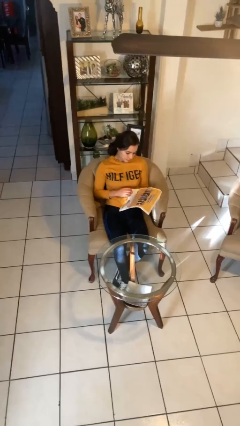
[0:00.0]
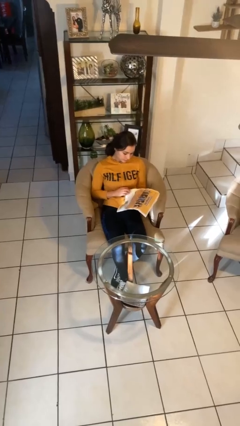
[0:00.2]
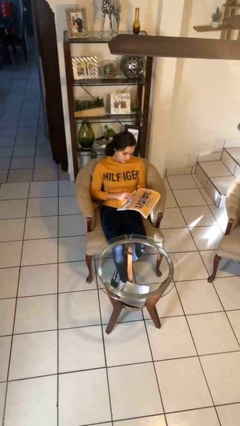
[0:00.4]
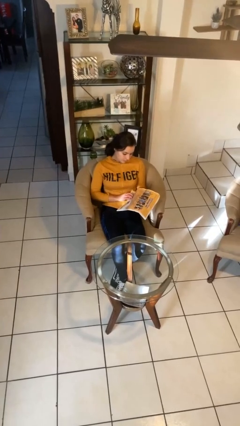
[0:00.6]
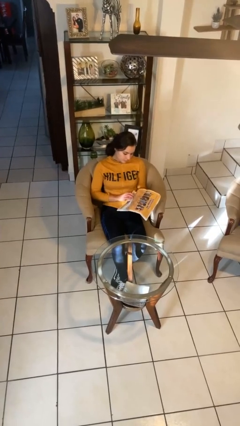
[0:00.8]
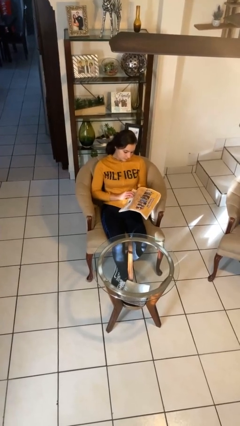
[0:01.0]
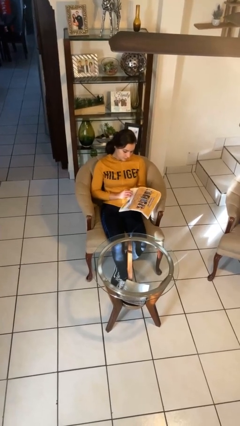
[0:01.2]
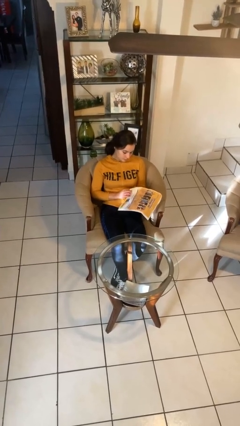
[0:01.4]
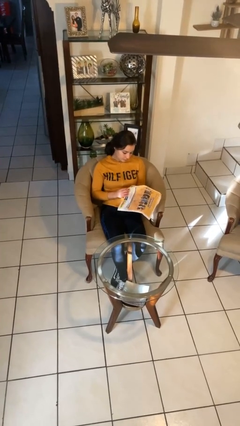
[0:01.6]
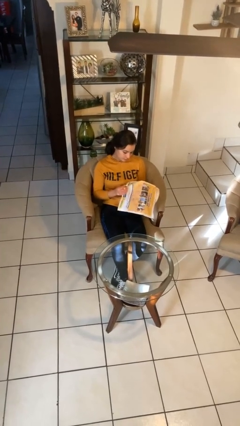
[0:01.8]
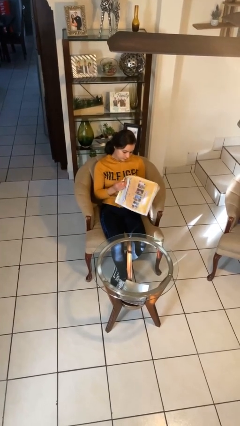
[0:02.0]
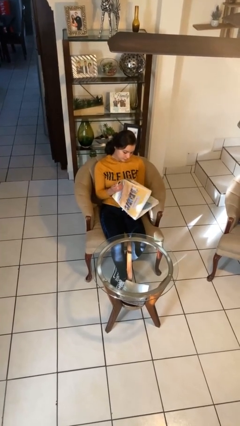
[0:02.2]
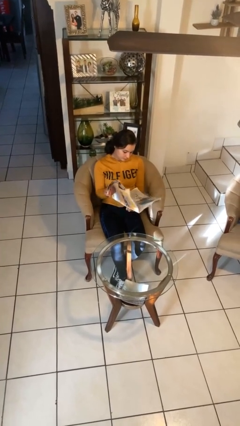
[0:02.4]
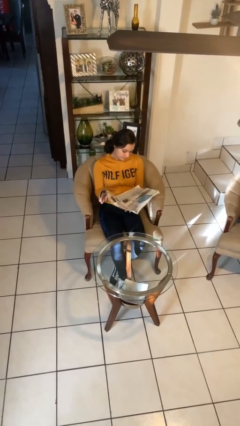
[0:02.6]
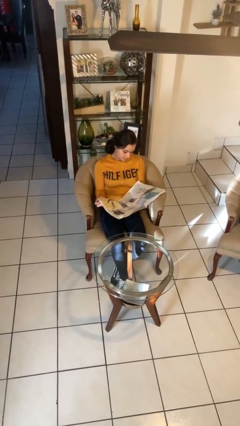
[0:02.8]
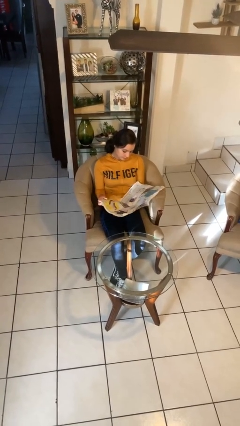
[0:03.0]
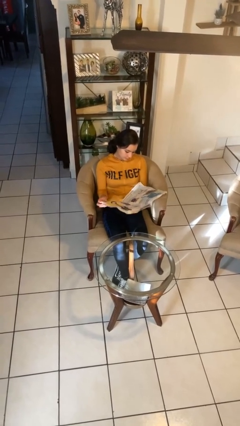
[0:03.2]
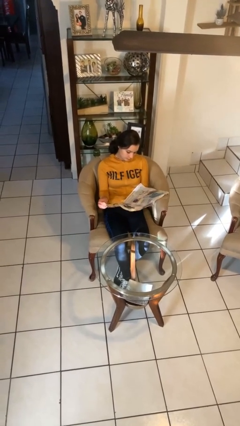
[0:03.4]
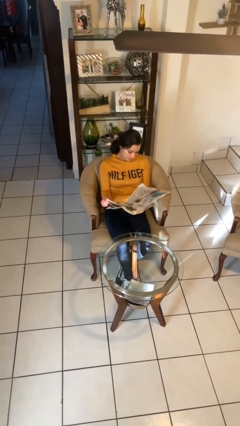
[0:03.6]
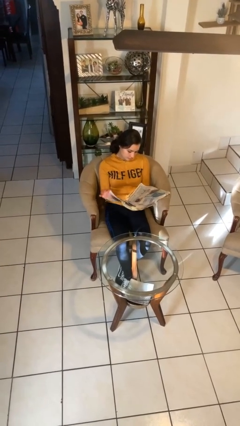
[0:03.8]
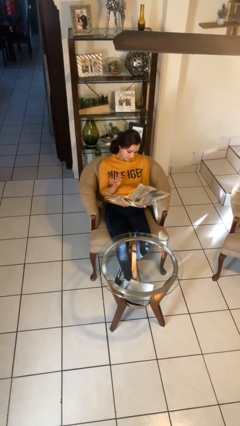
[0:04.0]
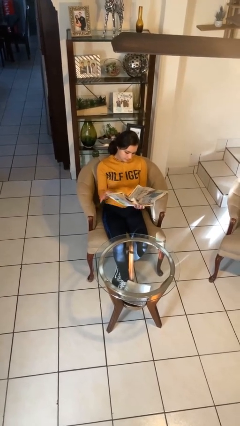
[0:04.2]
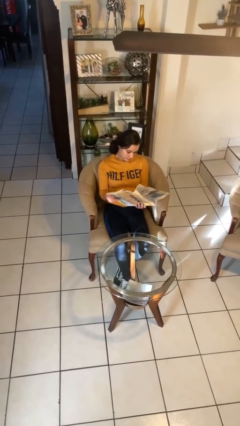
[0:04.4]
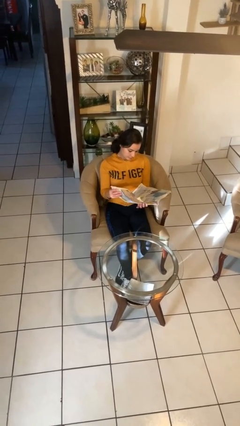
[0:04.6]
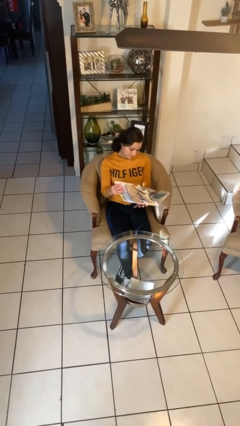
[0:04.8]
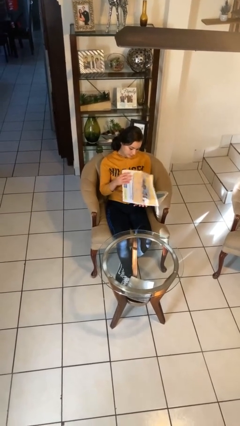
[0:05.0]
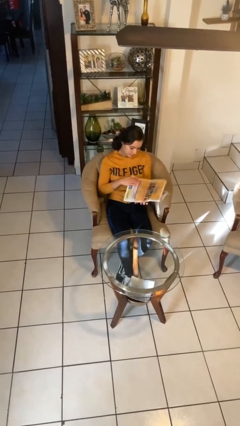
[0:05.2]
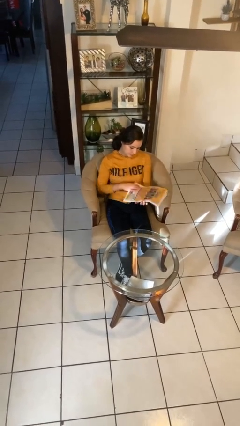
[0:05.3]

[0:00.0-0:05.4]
person reads newspaper

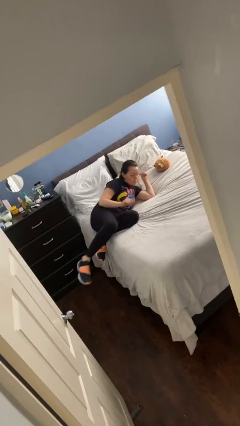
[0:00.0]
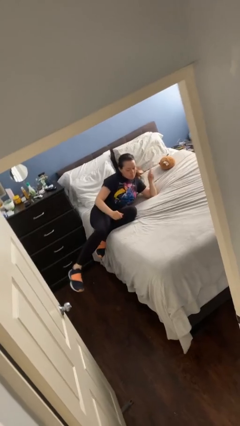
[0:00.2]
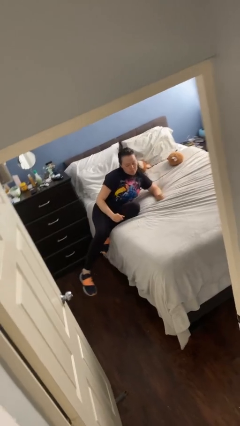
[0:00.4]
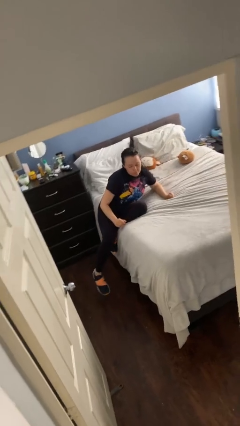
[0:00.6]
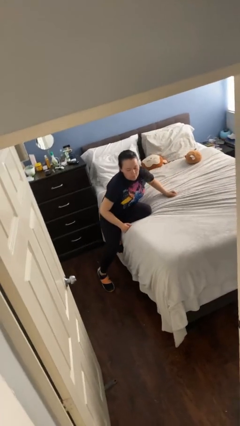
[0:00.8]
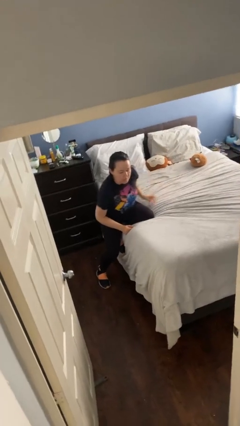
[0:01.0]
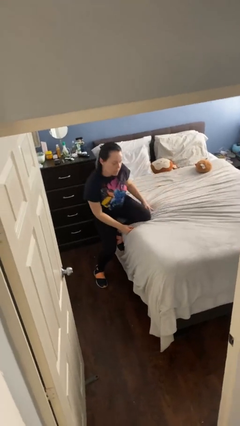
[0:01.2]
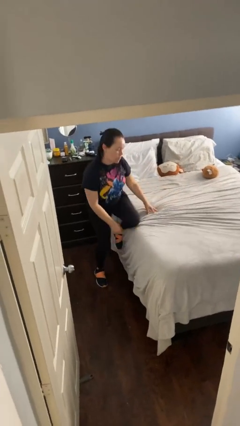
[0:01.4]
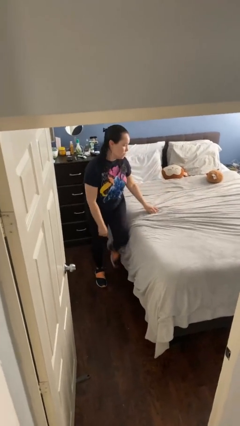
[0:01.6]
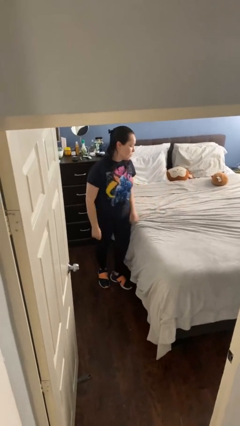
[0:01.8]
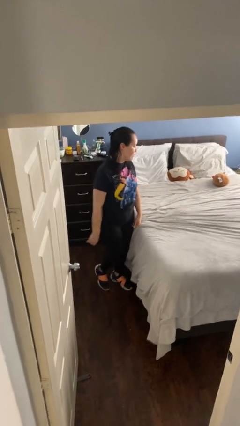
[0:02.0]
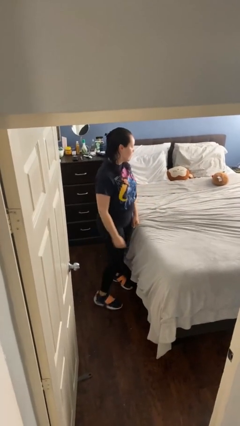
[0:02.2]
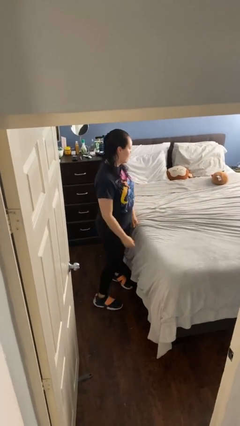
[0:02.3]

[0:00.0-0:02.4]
person stands up

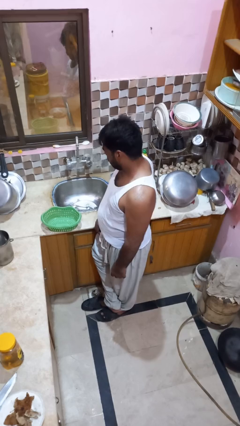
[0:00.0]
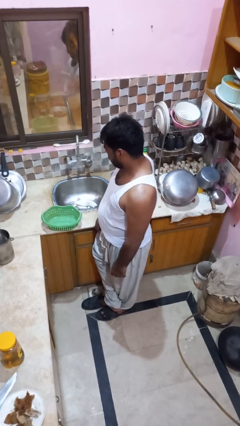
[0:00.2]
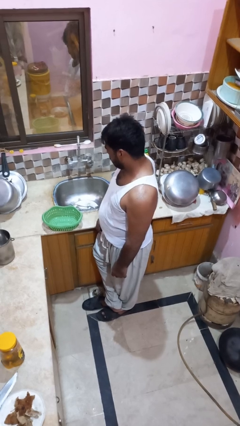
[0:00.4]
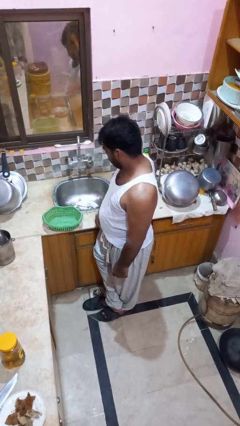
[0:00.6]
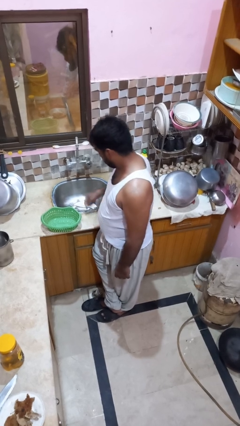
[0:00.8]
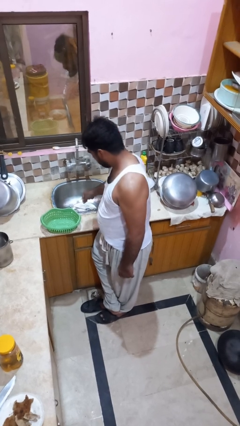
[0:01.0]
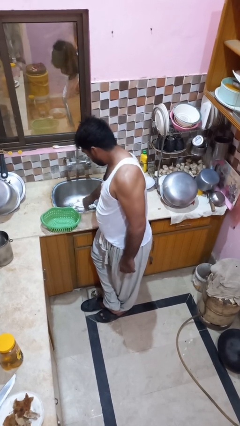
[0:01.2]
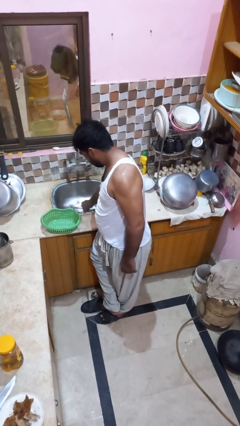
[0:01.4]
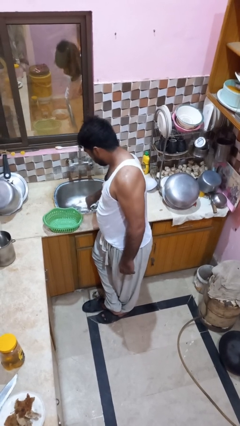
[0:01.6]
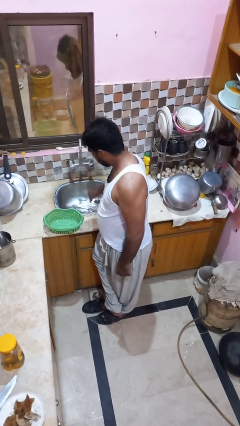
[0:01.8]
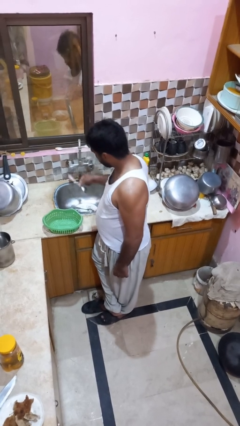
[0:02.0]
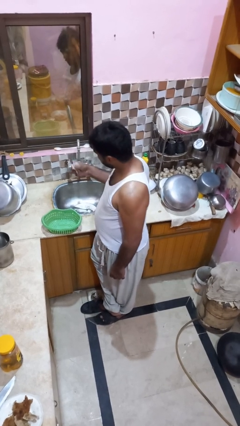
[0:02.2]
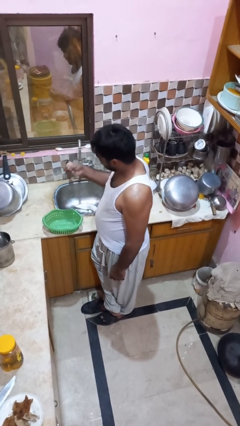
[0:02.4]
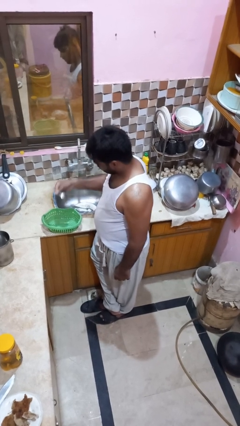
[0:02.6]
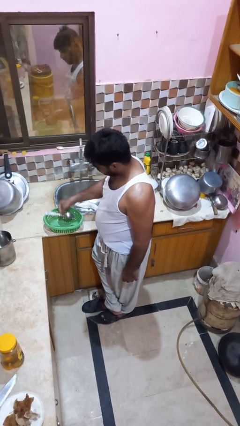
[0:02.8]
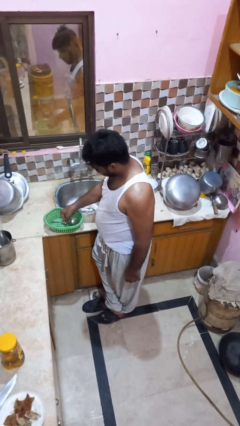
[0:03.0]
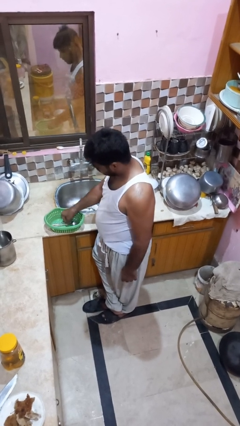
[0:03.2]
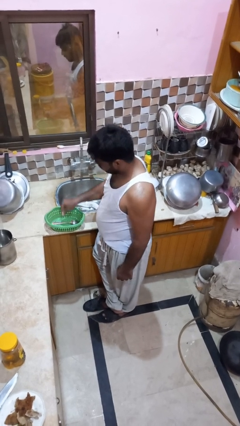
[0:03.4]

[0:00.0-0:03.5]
person loads dishwasher

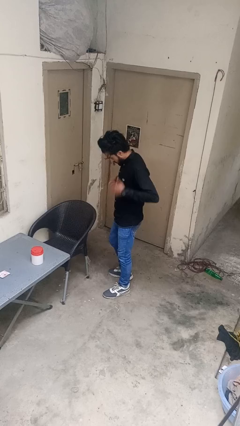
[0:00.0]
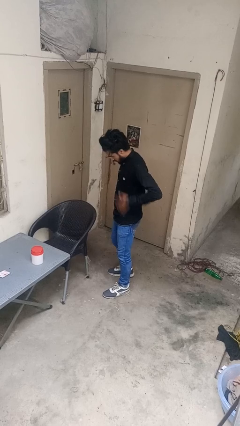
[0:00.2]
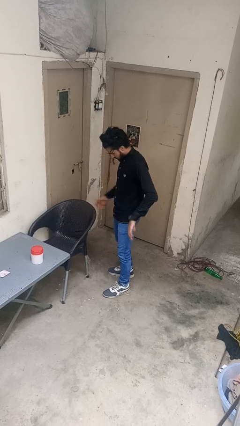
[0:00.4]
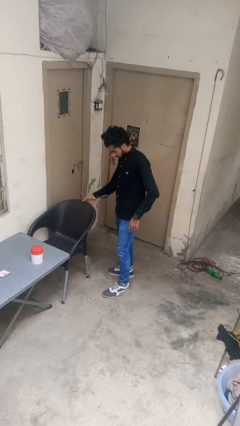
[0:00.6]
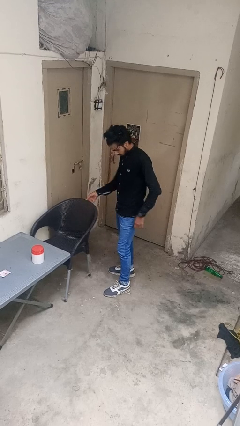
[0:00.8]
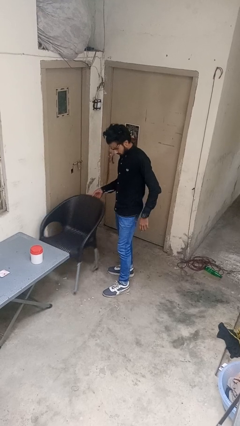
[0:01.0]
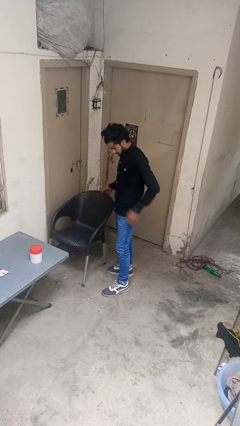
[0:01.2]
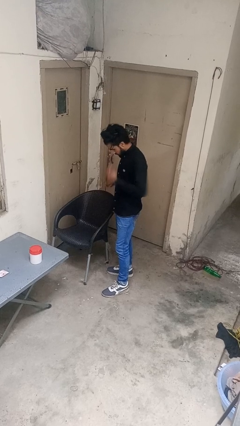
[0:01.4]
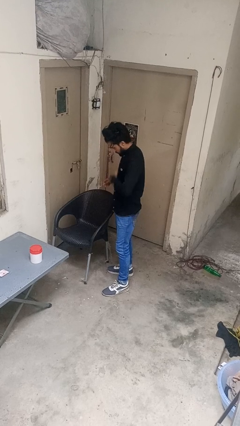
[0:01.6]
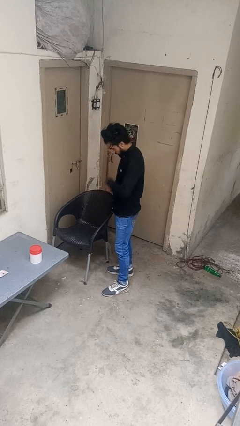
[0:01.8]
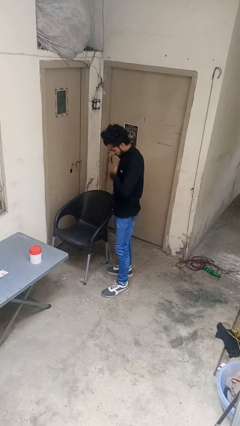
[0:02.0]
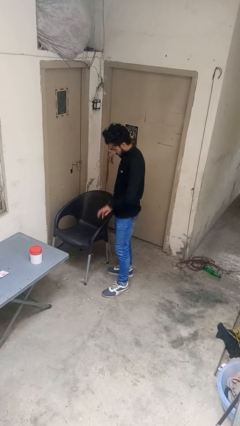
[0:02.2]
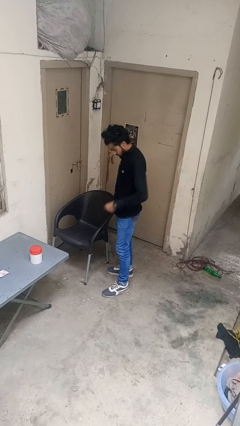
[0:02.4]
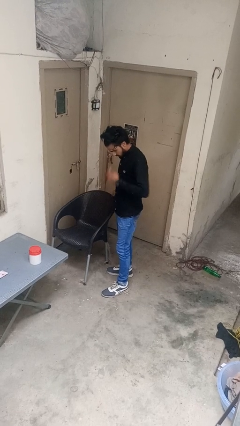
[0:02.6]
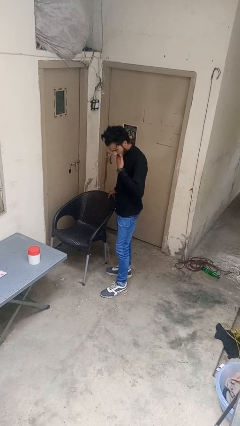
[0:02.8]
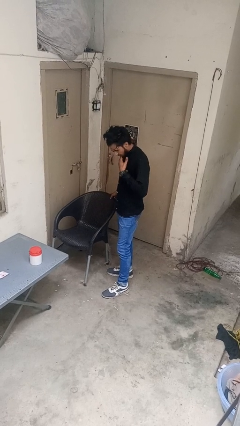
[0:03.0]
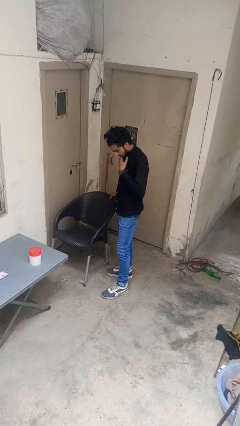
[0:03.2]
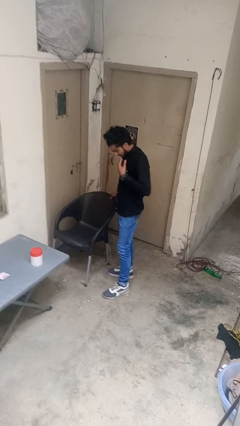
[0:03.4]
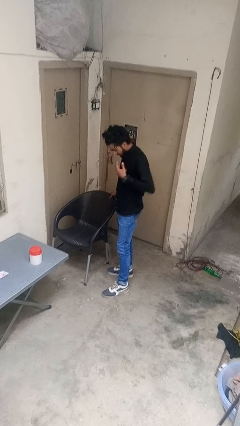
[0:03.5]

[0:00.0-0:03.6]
person pulls out chair

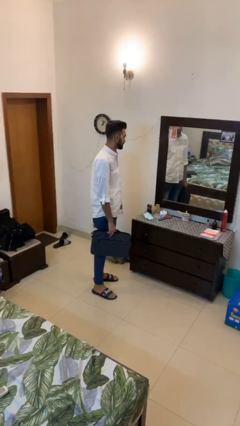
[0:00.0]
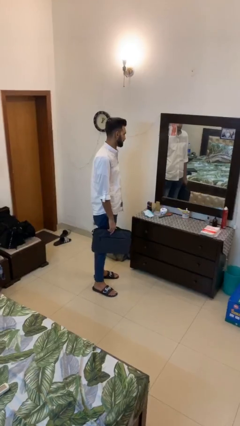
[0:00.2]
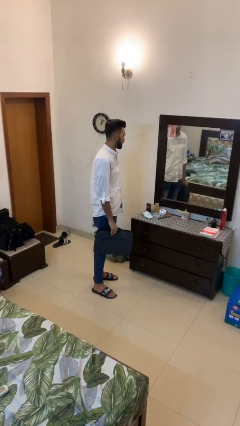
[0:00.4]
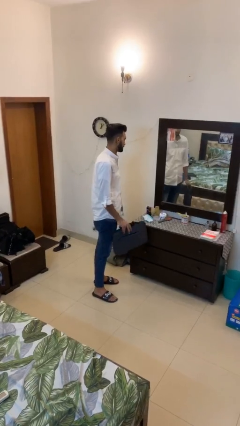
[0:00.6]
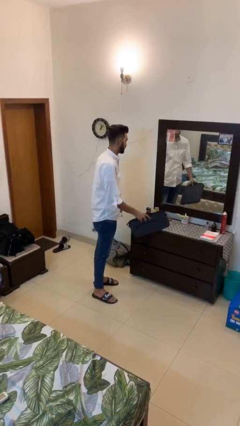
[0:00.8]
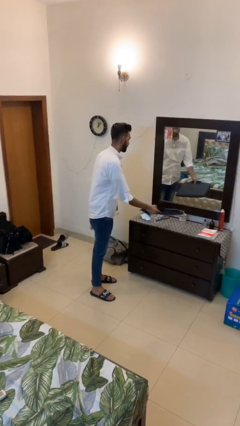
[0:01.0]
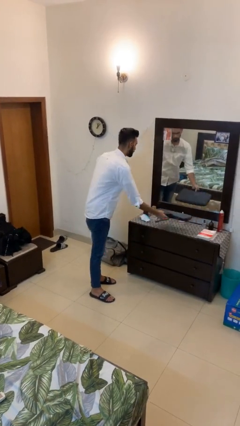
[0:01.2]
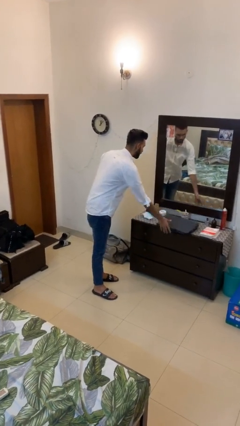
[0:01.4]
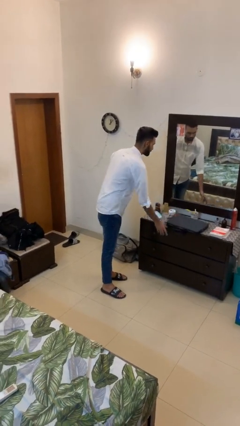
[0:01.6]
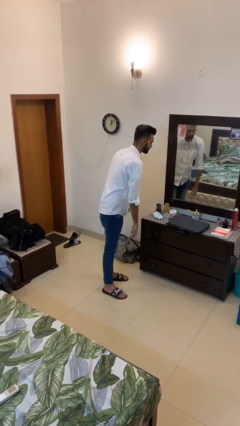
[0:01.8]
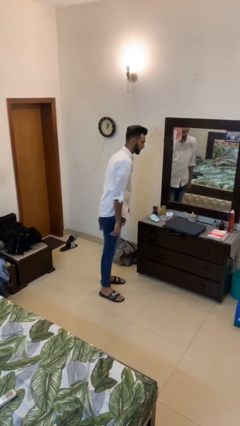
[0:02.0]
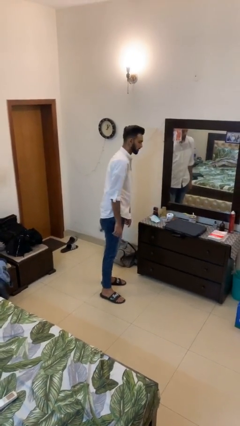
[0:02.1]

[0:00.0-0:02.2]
person puts down object on table

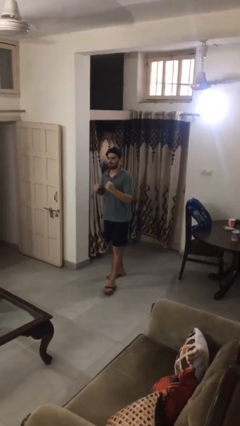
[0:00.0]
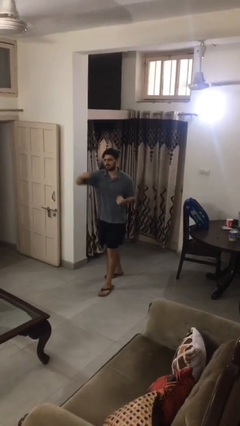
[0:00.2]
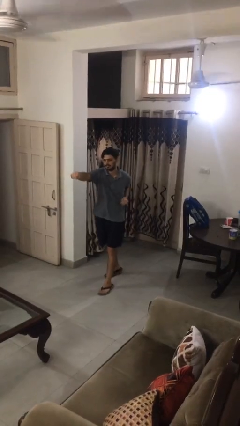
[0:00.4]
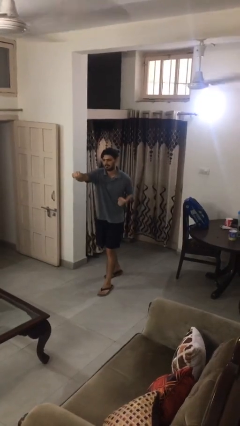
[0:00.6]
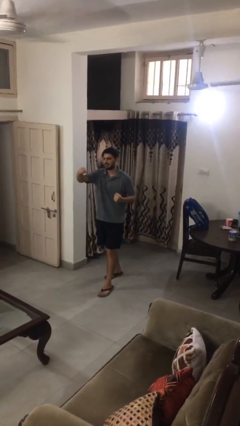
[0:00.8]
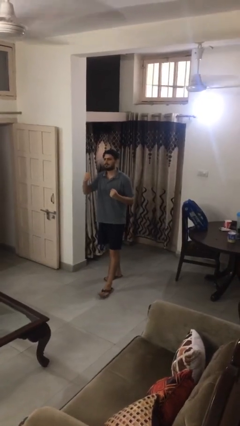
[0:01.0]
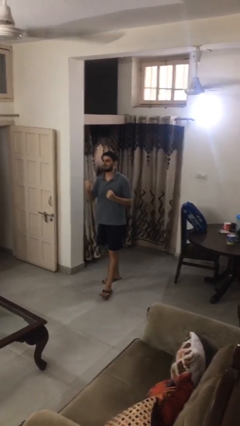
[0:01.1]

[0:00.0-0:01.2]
person punches
